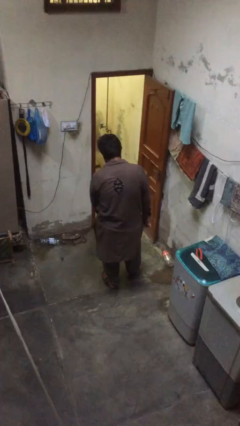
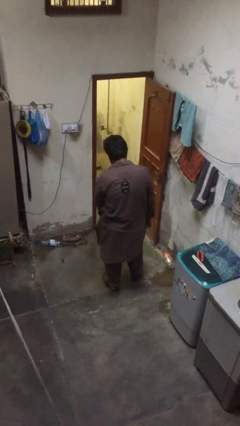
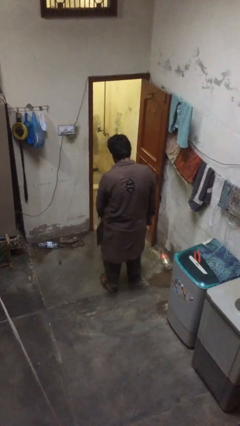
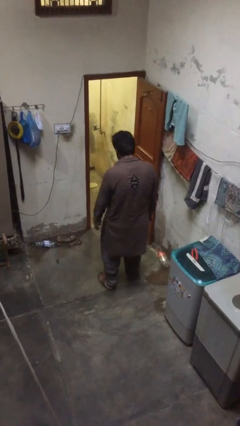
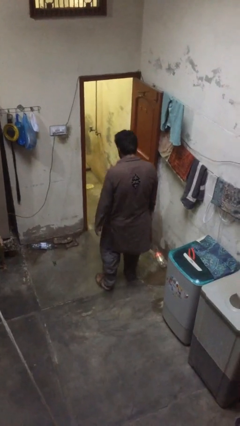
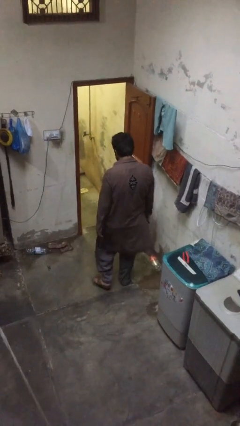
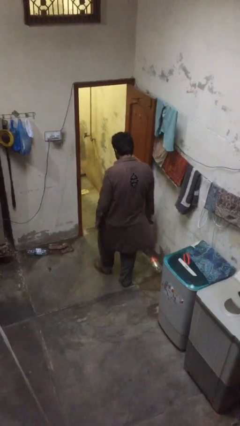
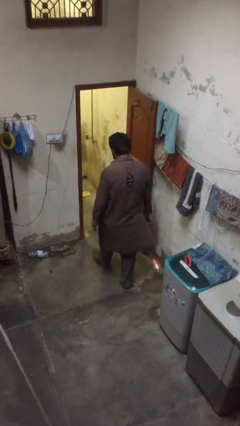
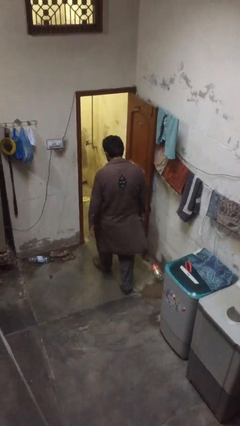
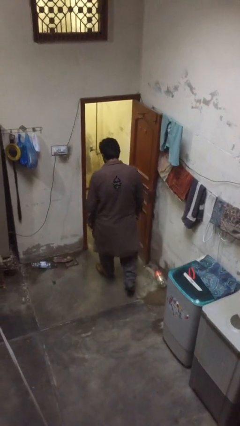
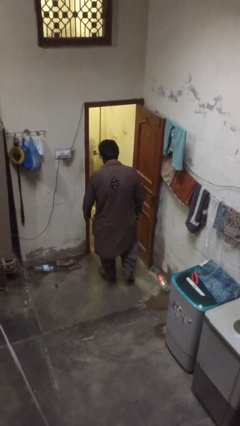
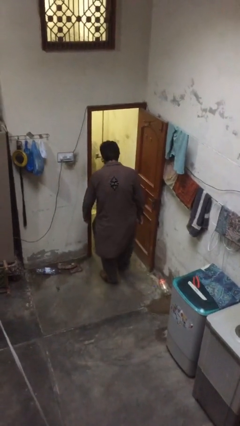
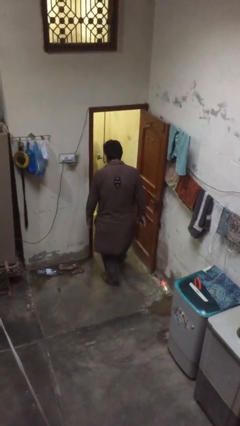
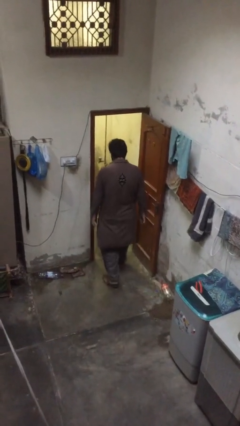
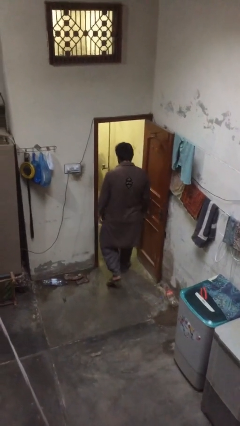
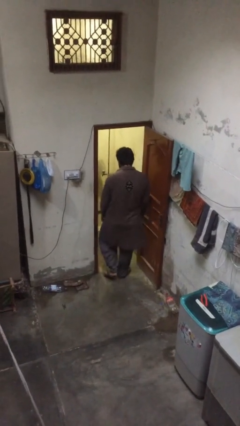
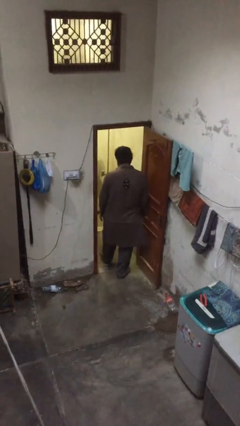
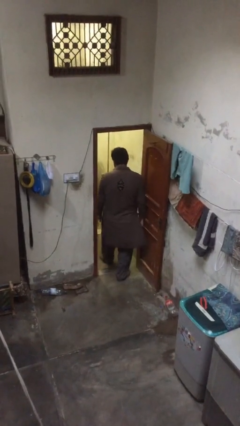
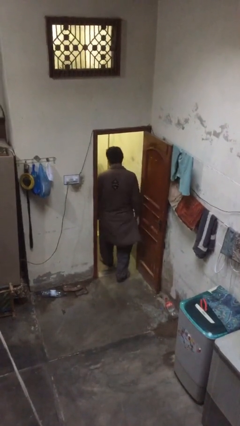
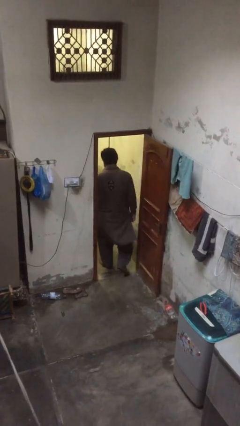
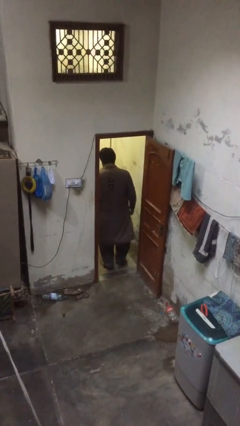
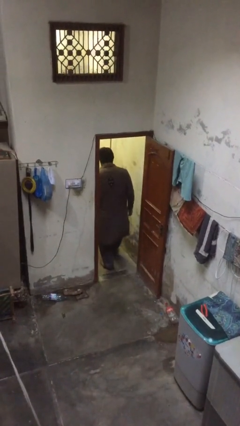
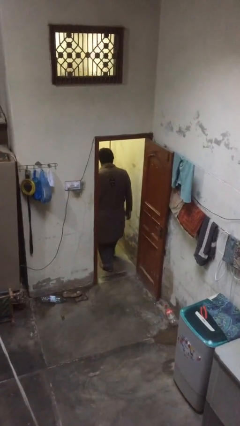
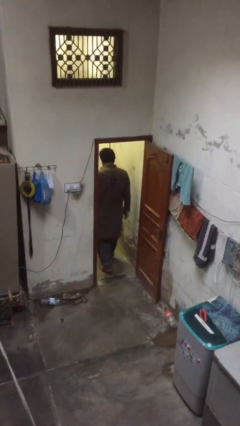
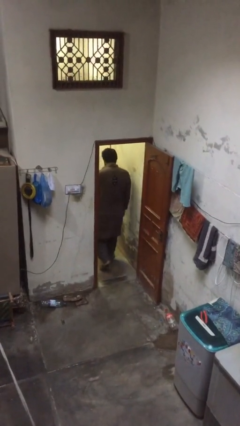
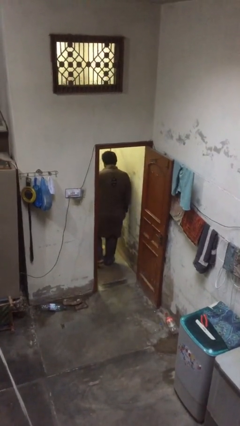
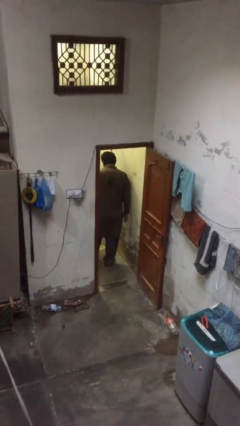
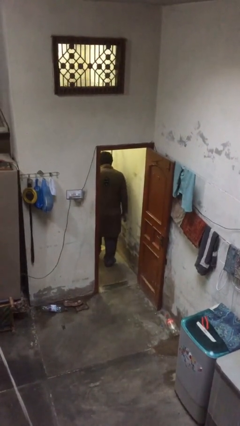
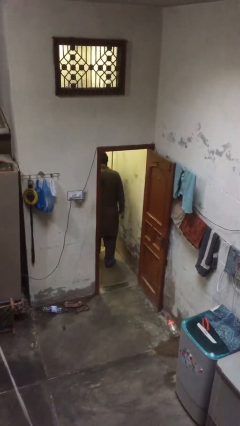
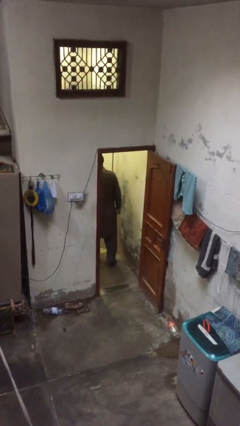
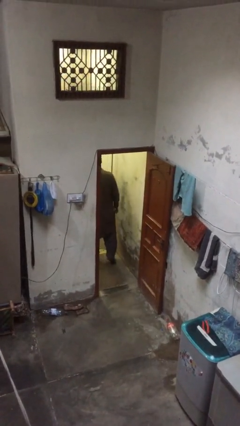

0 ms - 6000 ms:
person exits scene through structure

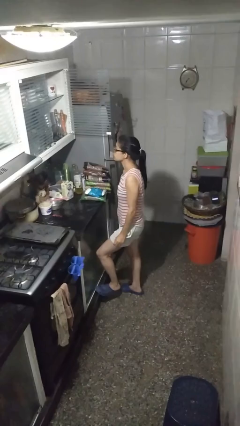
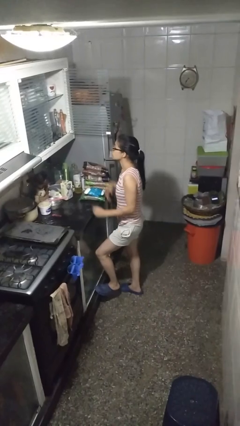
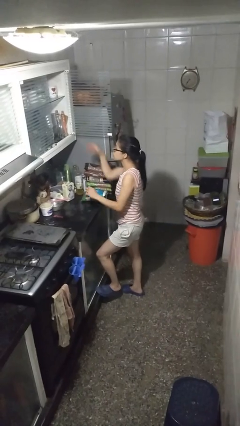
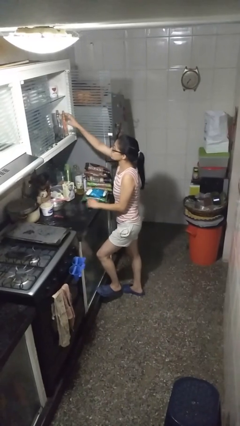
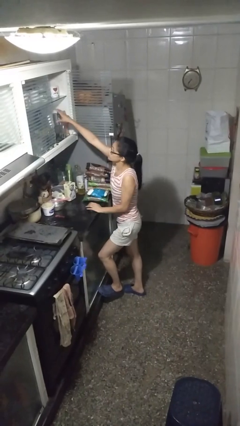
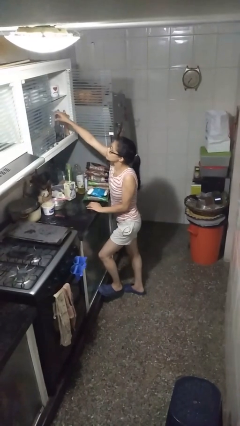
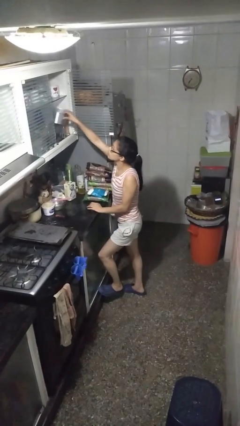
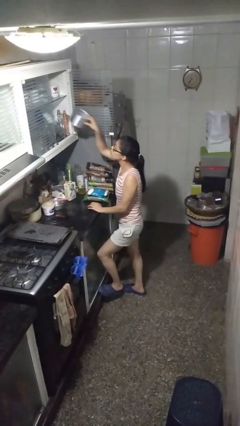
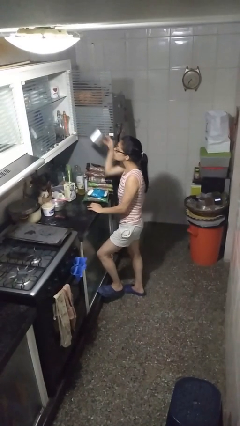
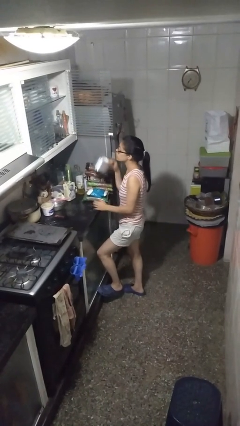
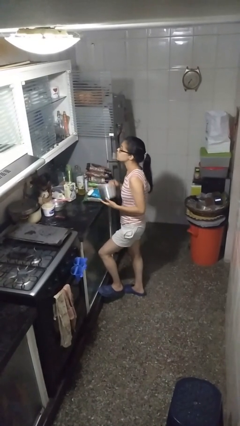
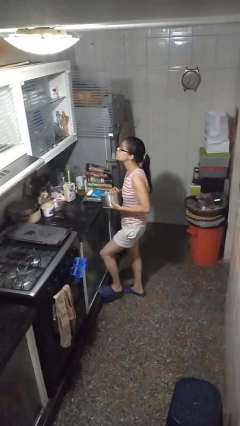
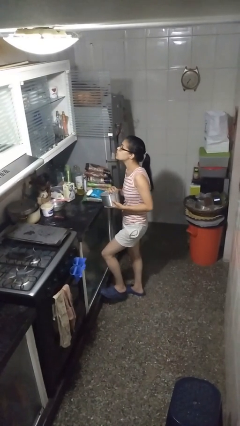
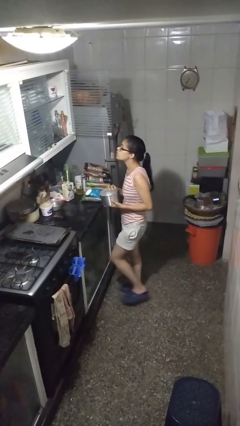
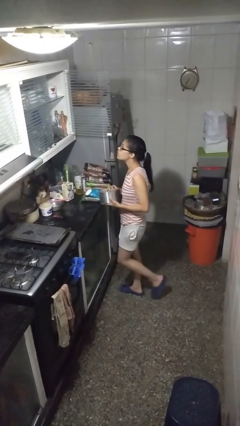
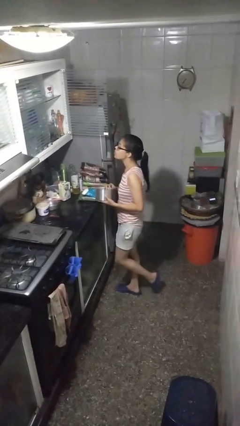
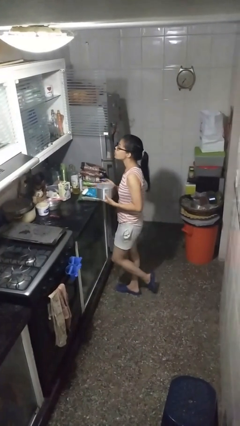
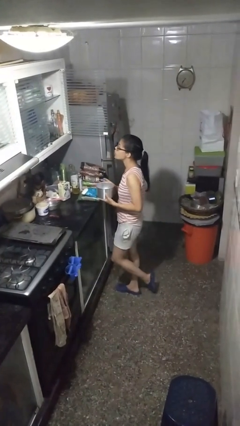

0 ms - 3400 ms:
person picks up object from cabinet

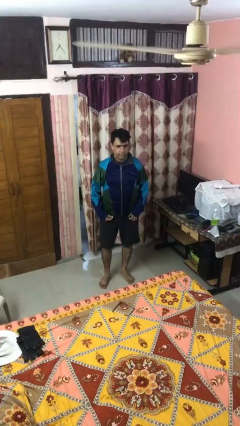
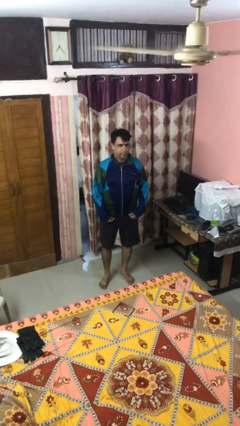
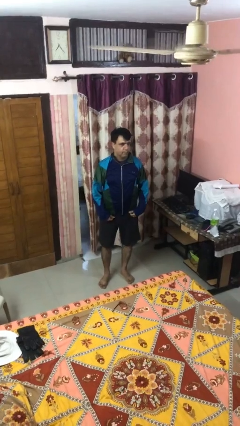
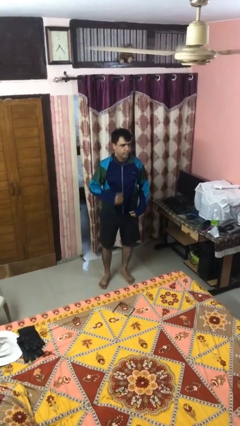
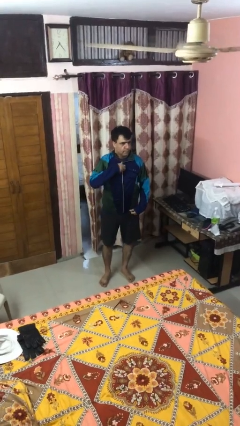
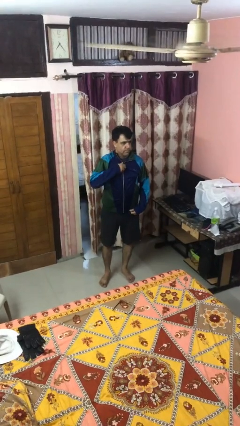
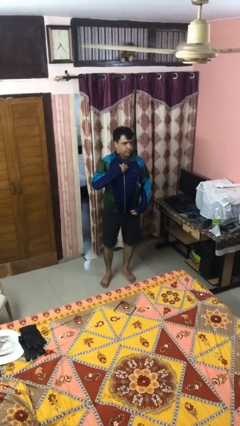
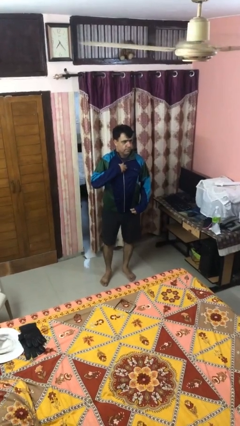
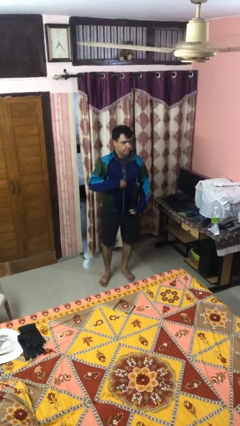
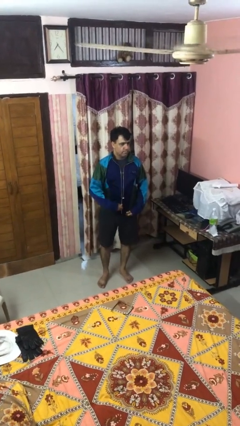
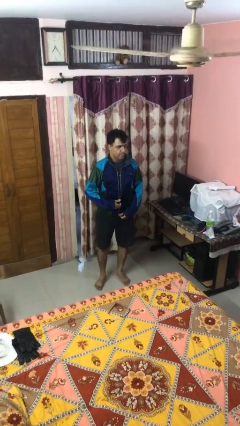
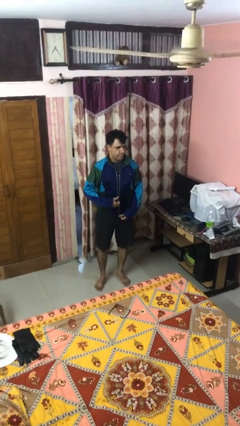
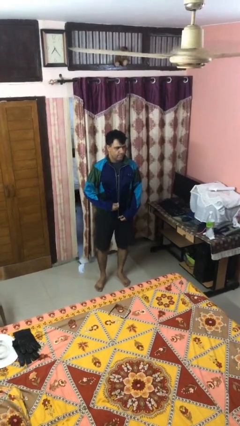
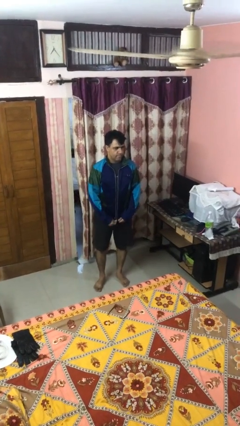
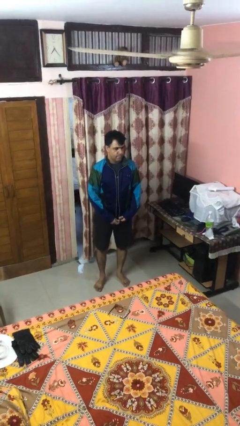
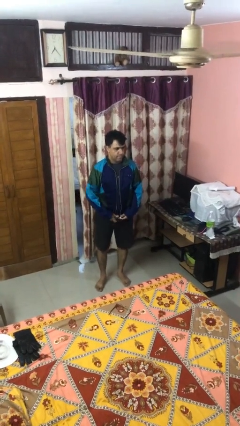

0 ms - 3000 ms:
person unzips jacket

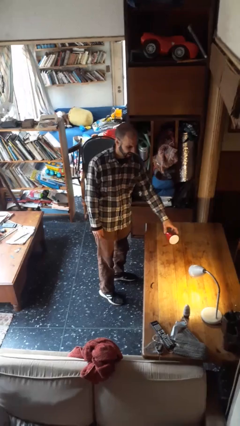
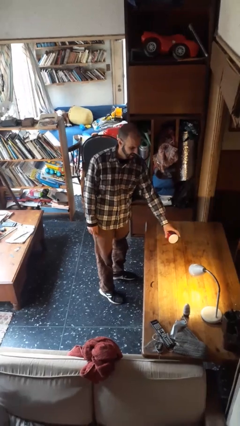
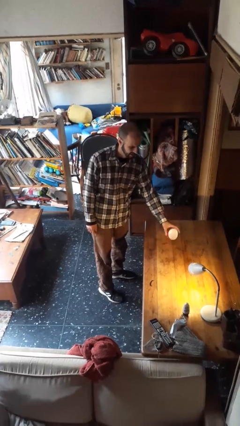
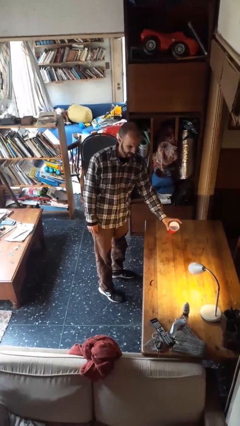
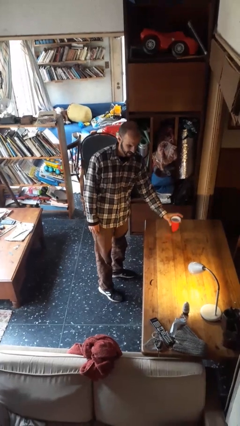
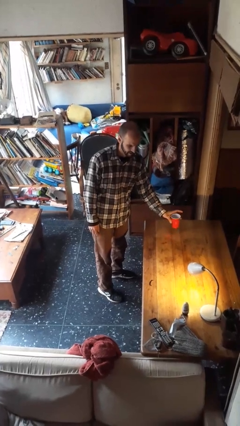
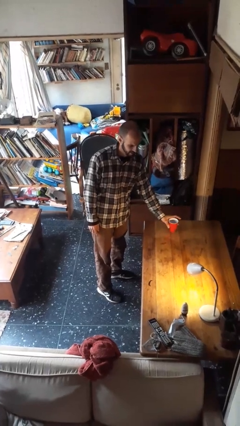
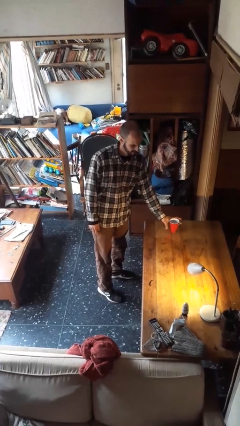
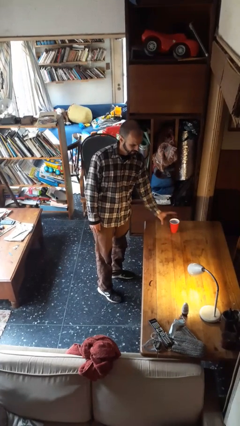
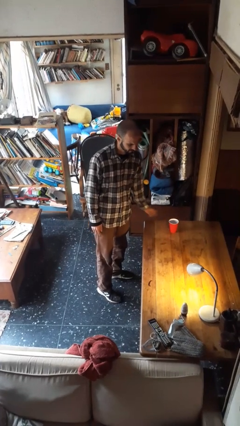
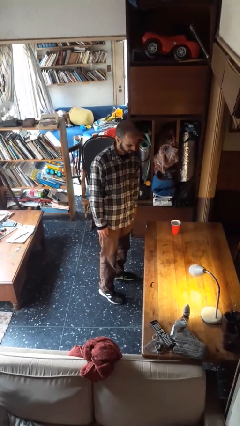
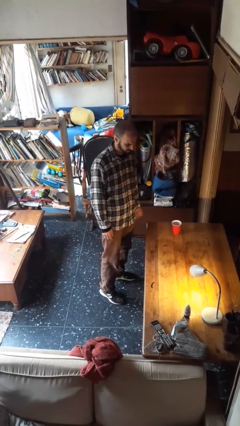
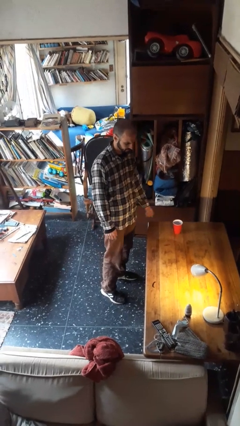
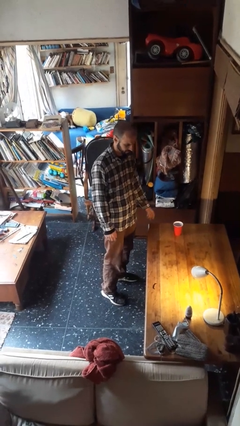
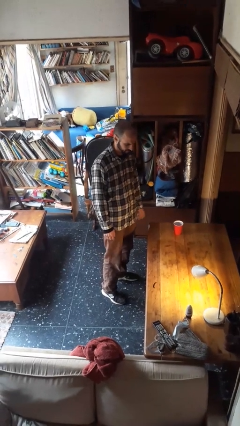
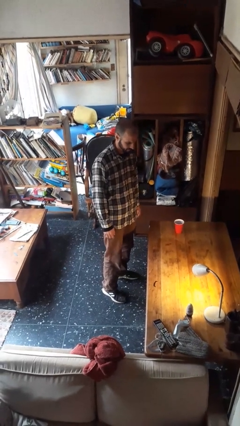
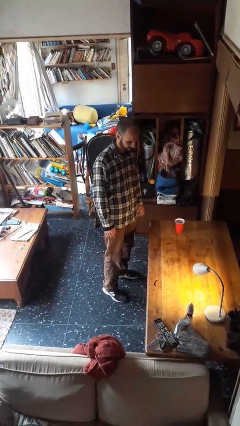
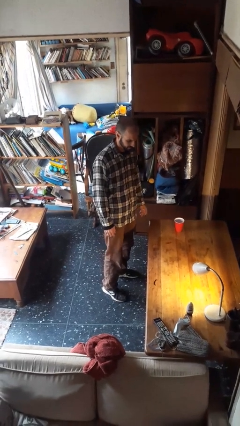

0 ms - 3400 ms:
person sets upright glass

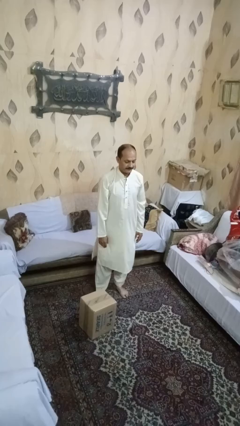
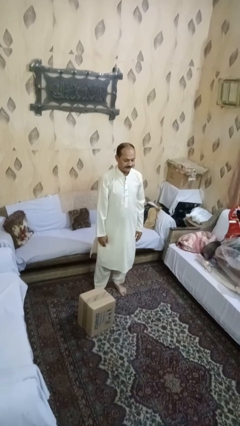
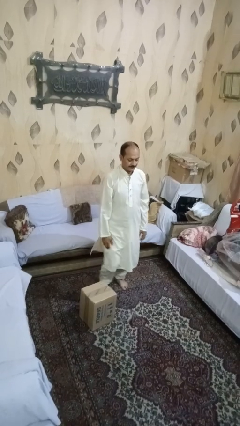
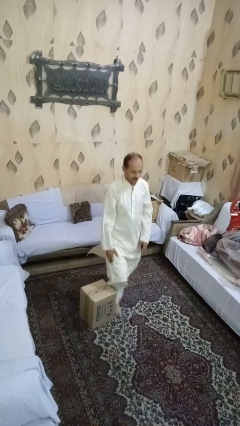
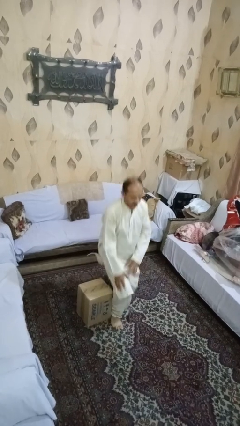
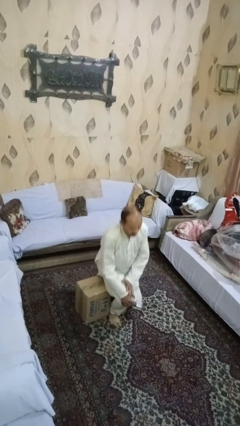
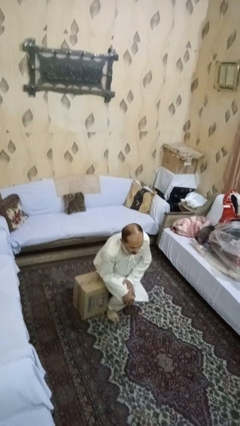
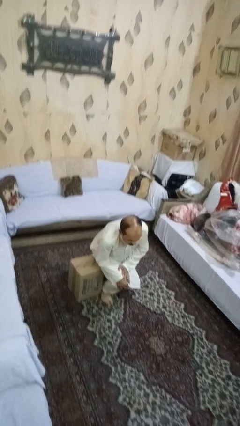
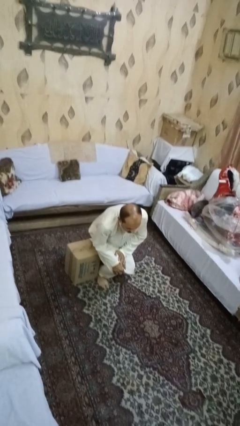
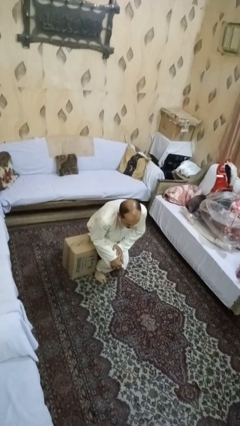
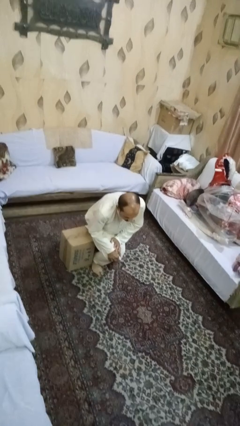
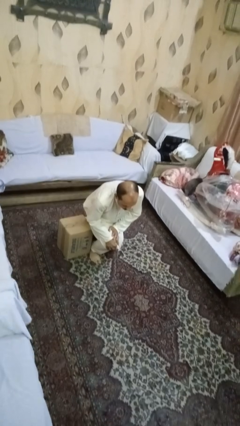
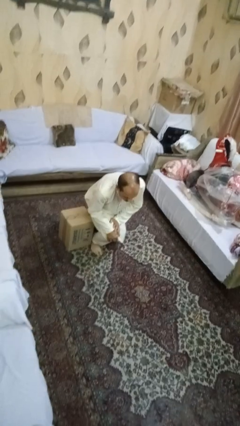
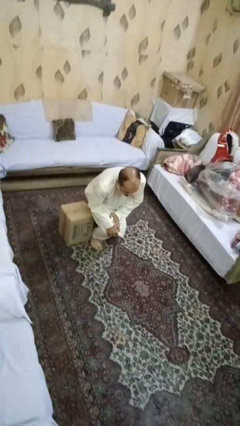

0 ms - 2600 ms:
person trips on object on floor
